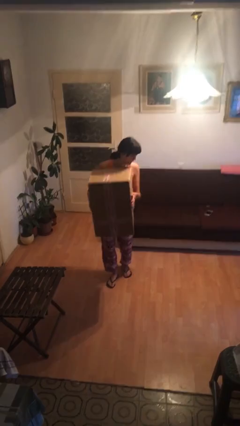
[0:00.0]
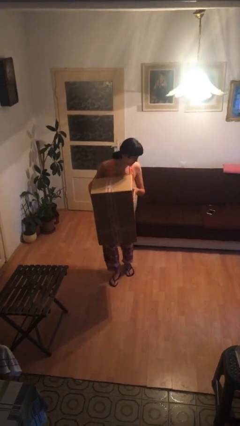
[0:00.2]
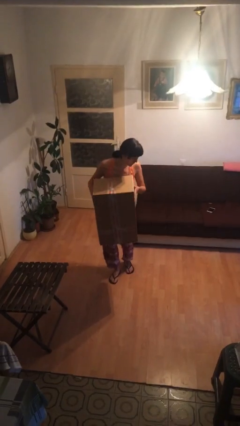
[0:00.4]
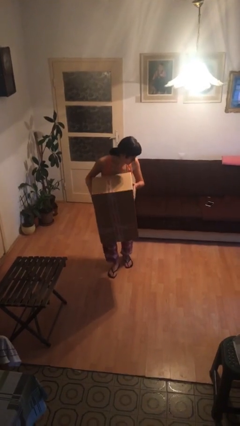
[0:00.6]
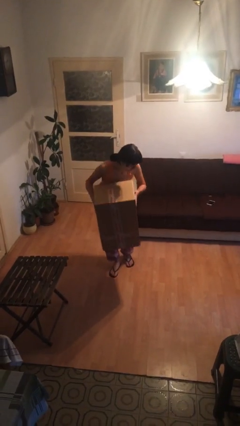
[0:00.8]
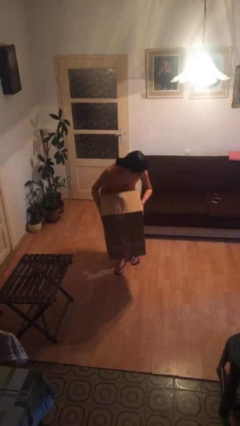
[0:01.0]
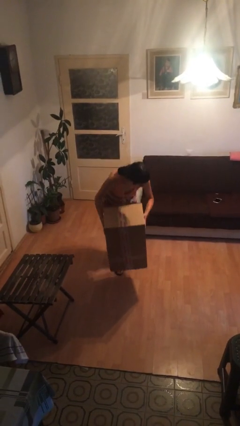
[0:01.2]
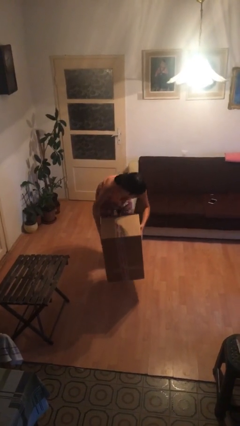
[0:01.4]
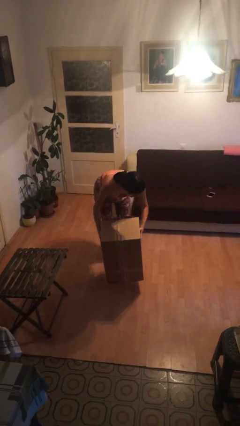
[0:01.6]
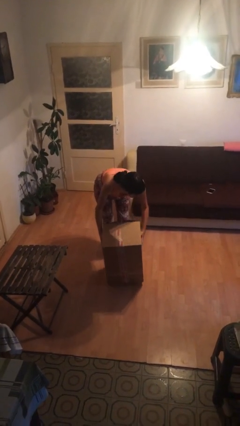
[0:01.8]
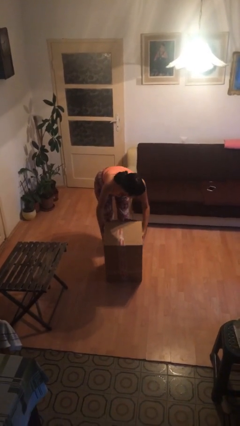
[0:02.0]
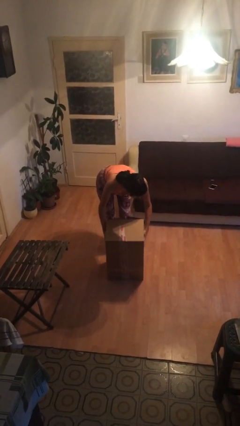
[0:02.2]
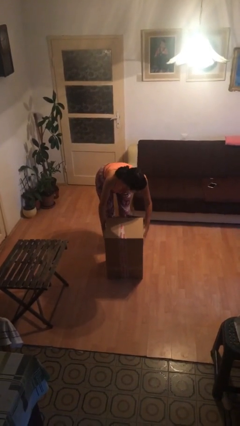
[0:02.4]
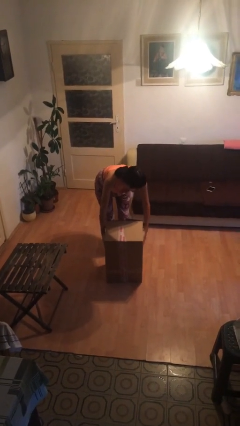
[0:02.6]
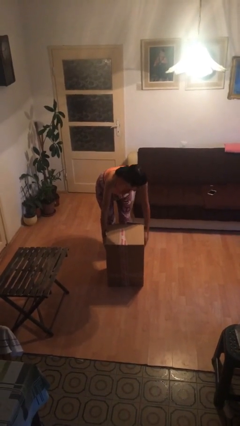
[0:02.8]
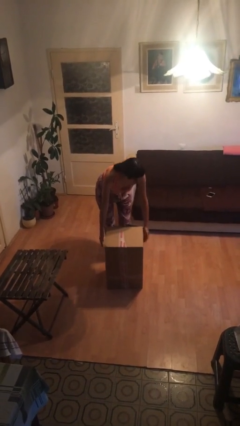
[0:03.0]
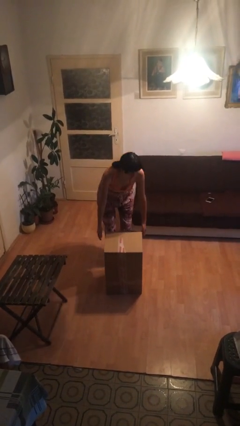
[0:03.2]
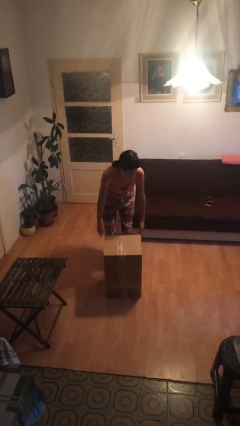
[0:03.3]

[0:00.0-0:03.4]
person puts down object on floor

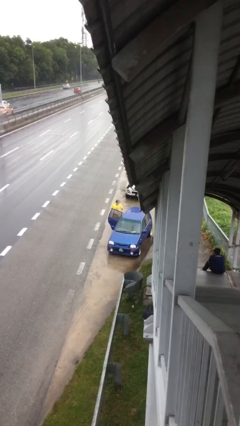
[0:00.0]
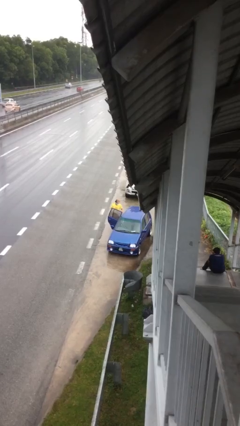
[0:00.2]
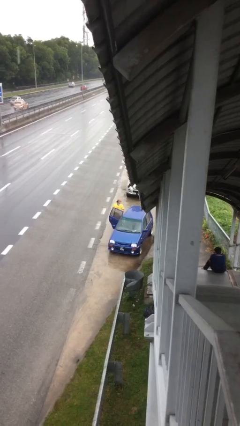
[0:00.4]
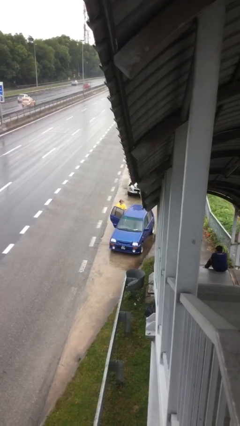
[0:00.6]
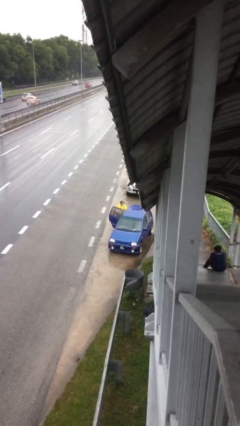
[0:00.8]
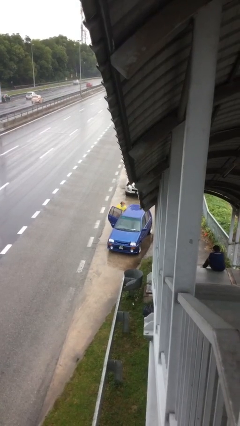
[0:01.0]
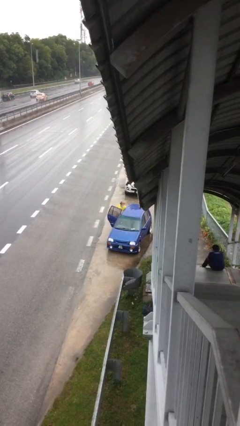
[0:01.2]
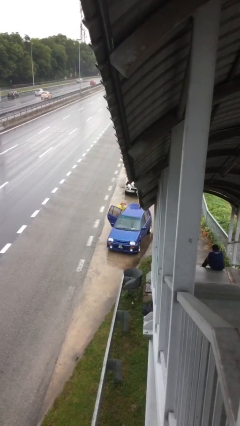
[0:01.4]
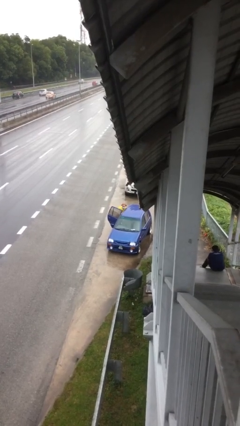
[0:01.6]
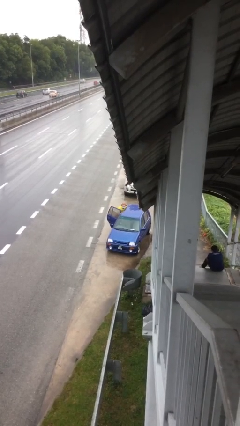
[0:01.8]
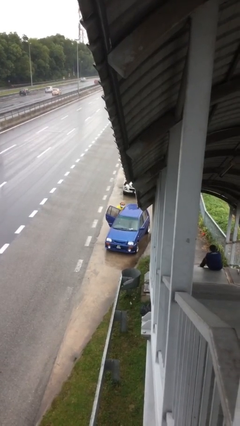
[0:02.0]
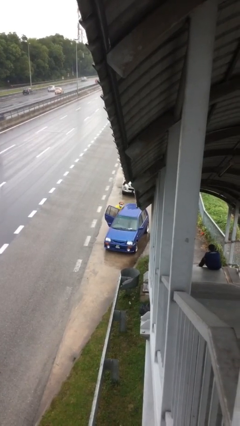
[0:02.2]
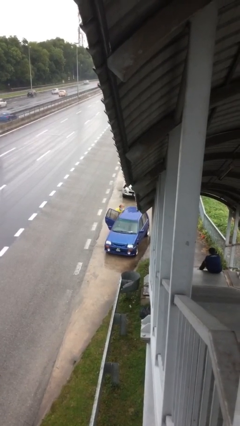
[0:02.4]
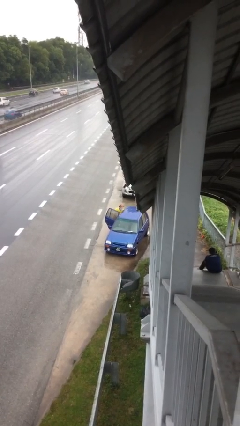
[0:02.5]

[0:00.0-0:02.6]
person loads car

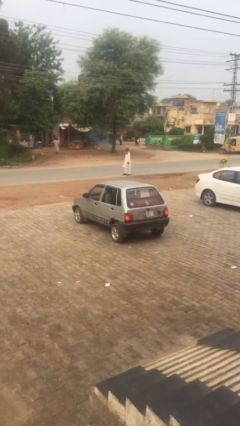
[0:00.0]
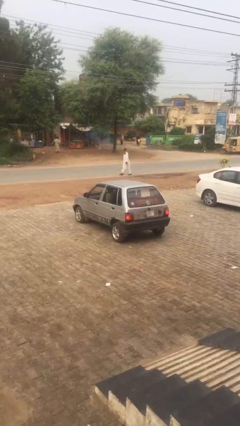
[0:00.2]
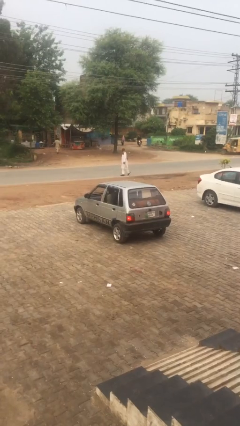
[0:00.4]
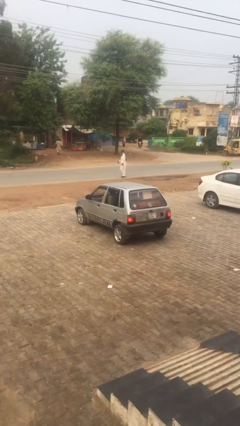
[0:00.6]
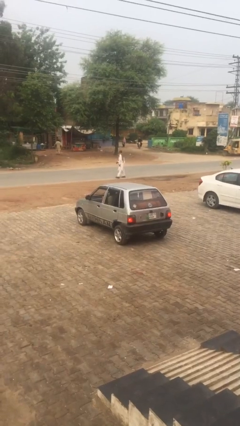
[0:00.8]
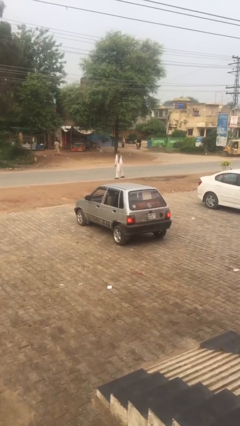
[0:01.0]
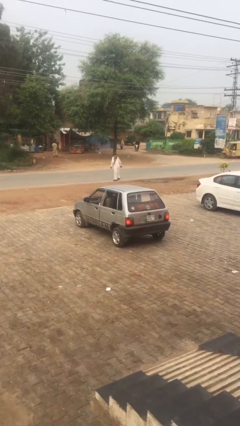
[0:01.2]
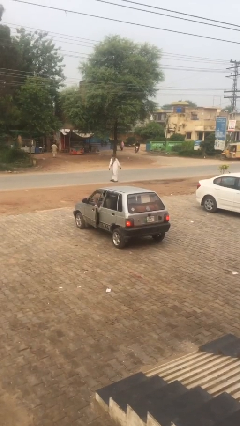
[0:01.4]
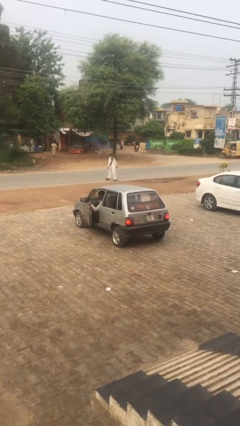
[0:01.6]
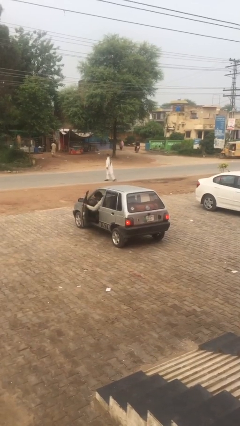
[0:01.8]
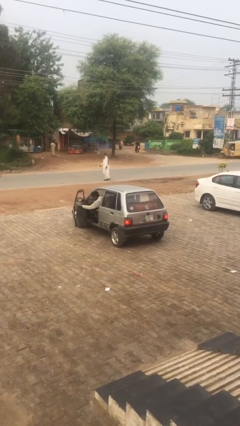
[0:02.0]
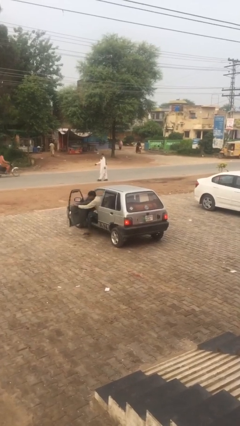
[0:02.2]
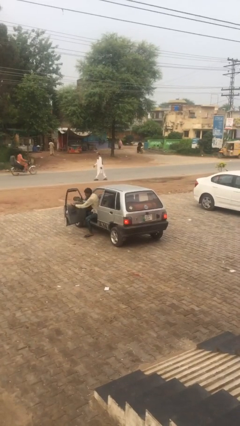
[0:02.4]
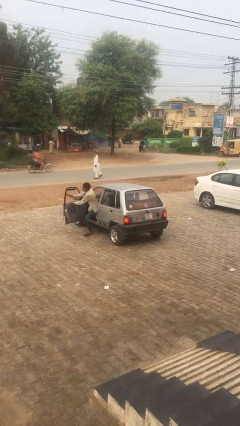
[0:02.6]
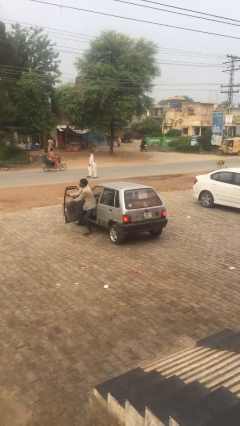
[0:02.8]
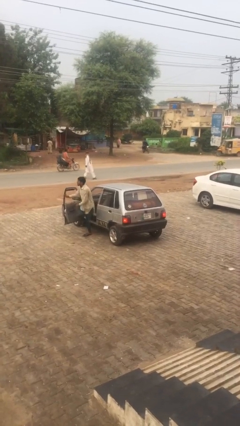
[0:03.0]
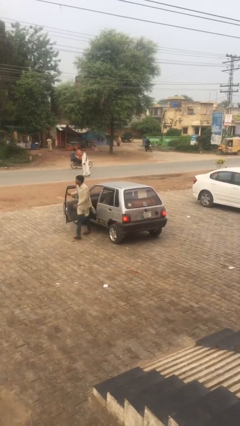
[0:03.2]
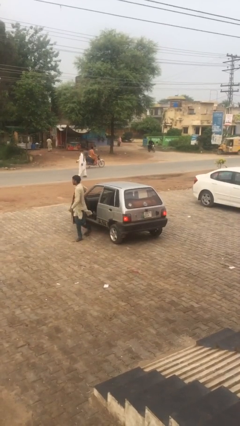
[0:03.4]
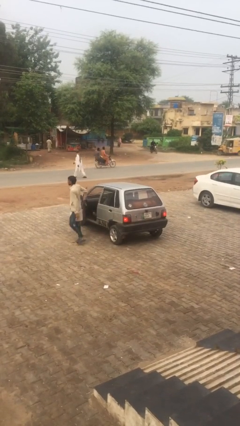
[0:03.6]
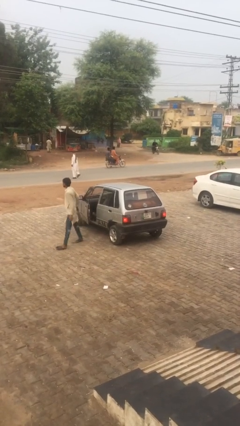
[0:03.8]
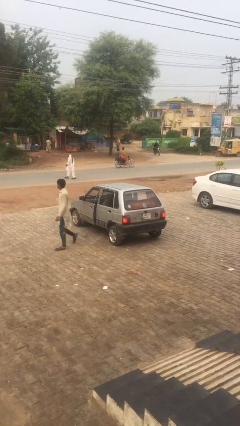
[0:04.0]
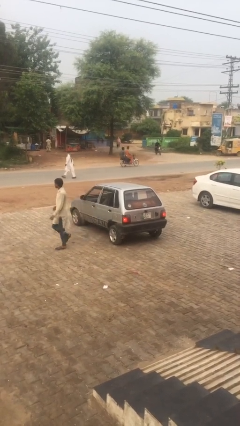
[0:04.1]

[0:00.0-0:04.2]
car drops off person

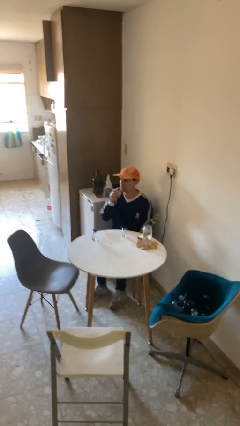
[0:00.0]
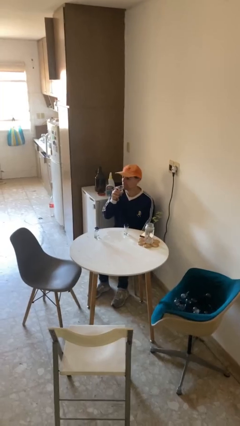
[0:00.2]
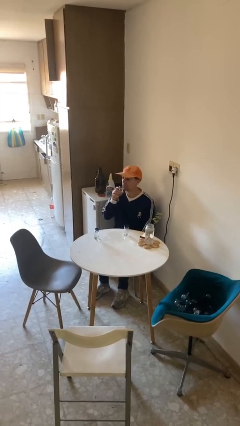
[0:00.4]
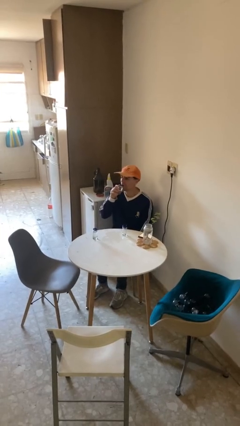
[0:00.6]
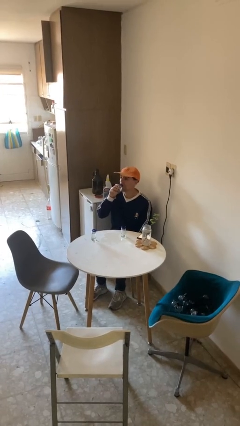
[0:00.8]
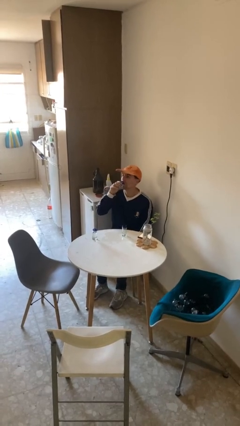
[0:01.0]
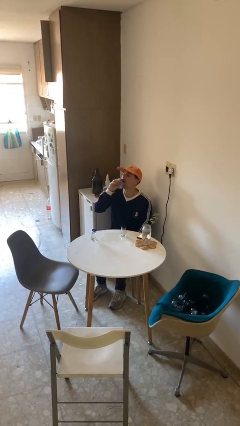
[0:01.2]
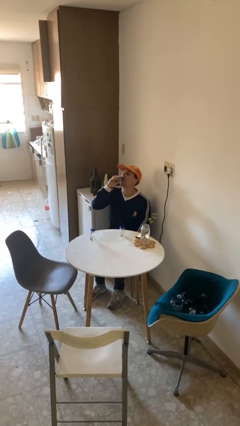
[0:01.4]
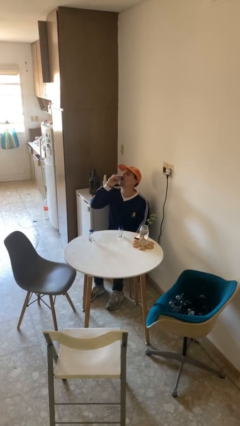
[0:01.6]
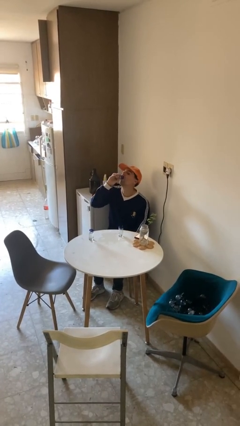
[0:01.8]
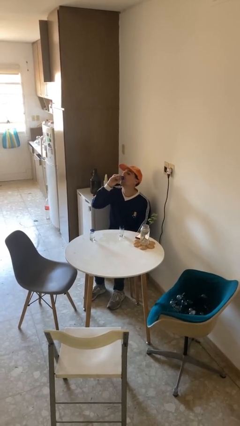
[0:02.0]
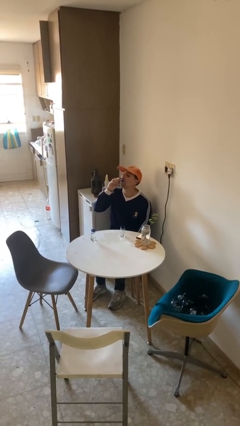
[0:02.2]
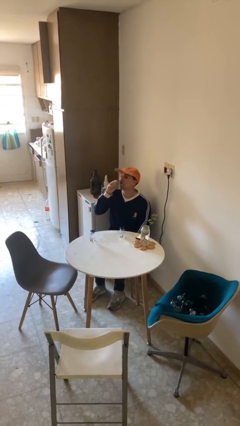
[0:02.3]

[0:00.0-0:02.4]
person drinks from shotglass

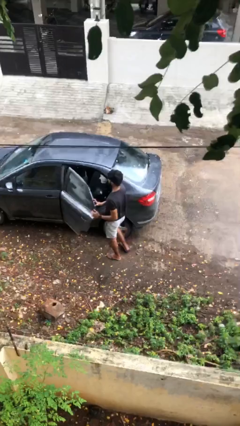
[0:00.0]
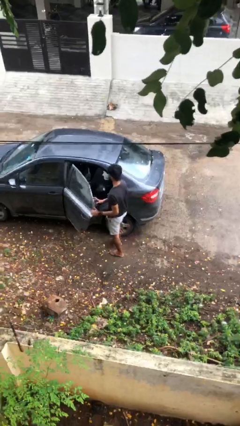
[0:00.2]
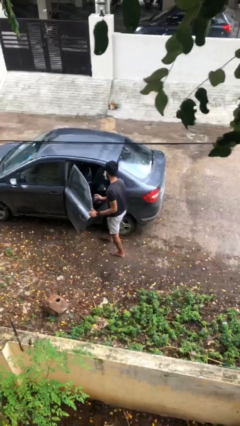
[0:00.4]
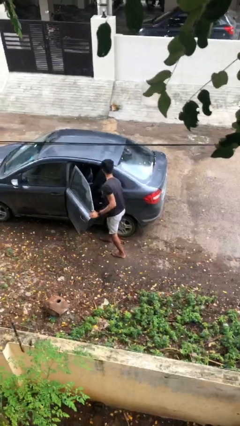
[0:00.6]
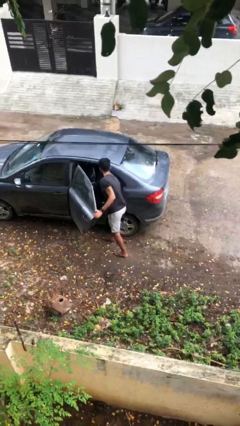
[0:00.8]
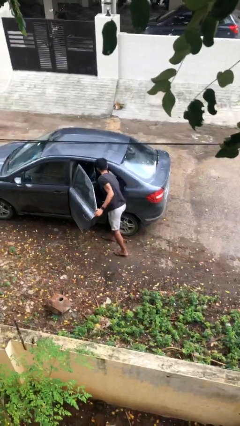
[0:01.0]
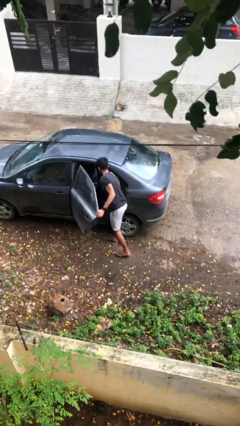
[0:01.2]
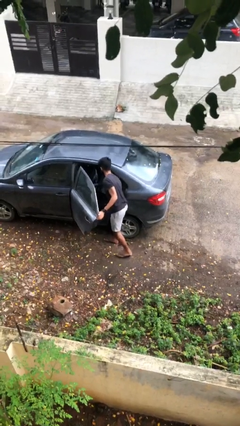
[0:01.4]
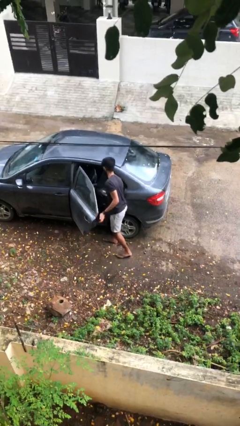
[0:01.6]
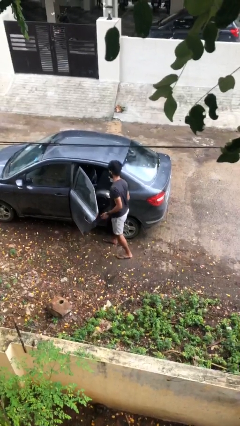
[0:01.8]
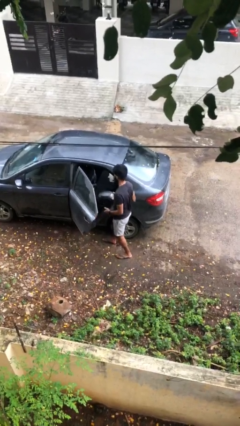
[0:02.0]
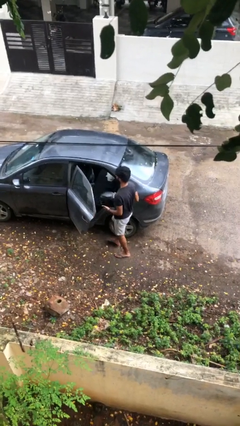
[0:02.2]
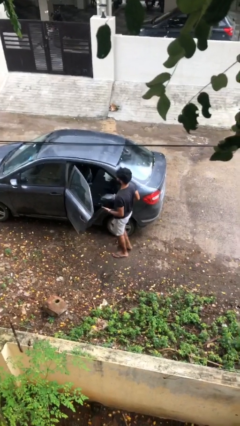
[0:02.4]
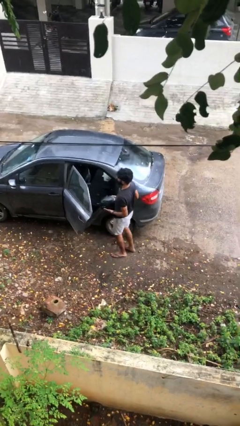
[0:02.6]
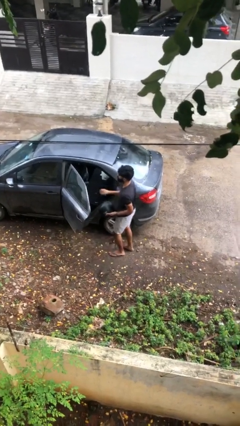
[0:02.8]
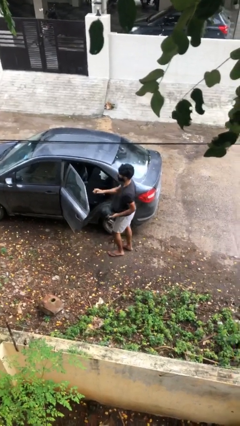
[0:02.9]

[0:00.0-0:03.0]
person unloads car

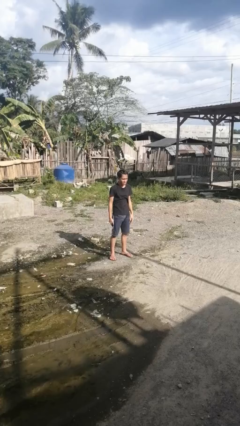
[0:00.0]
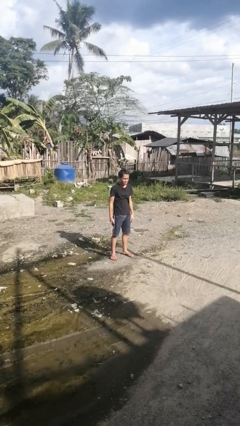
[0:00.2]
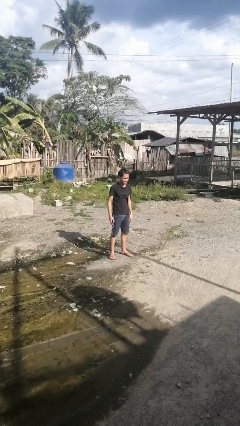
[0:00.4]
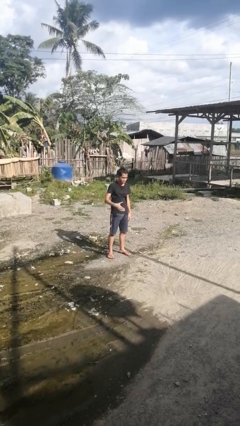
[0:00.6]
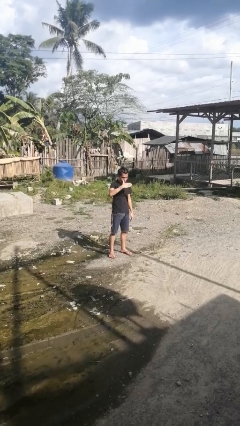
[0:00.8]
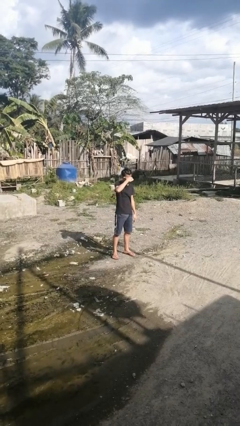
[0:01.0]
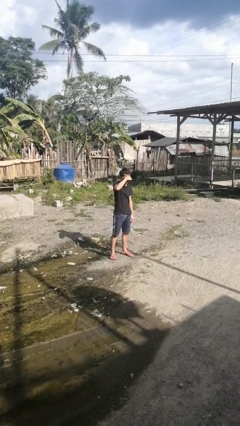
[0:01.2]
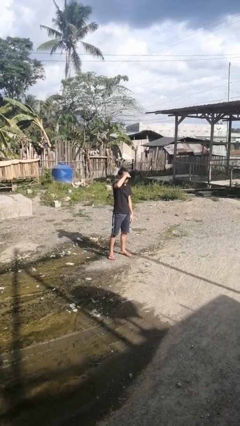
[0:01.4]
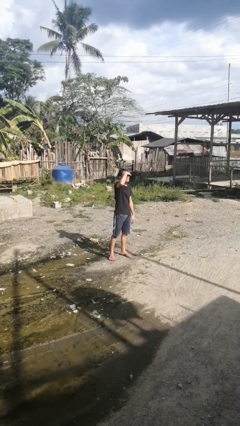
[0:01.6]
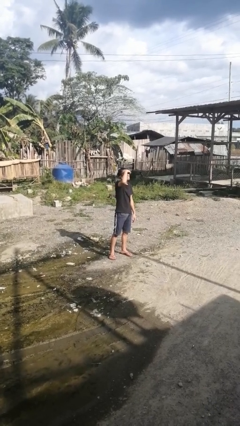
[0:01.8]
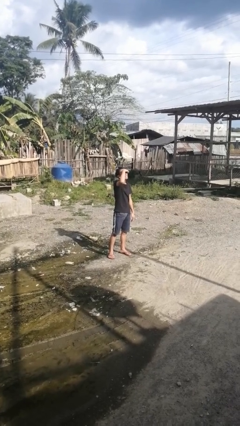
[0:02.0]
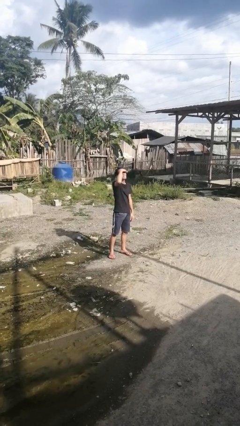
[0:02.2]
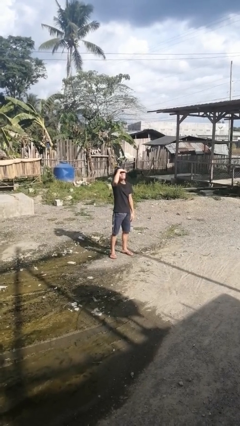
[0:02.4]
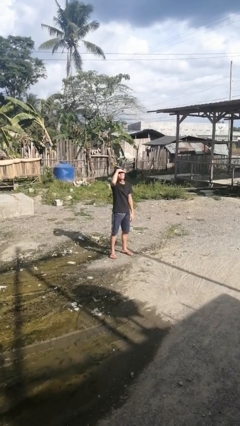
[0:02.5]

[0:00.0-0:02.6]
person shades eyes
